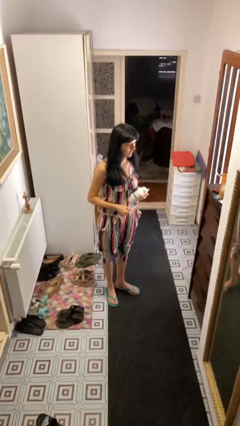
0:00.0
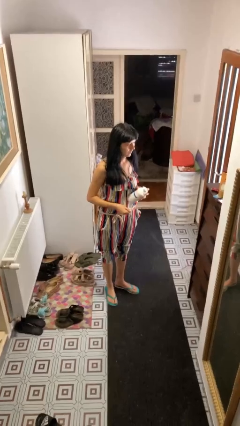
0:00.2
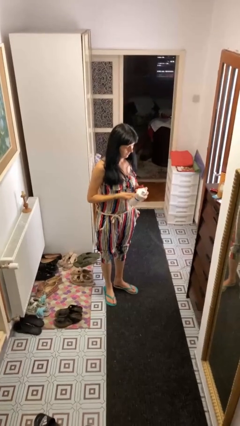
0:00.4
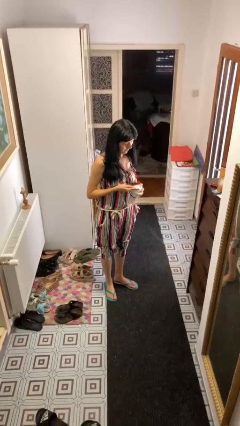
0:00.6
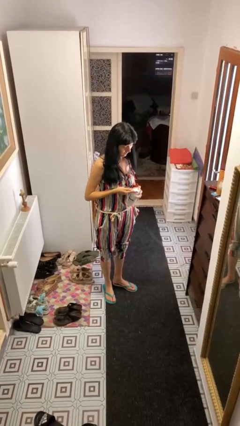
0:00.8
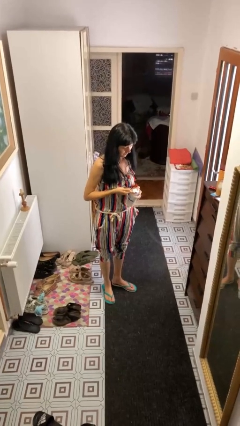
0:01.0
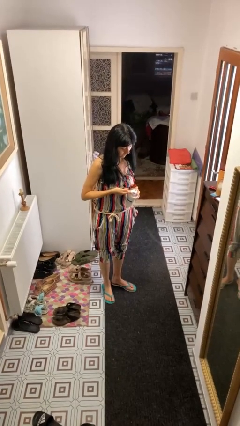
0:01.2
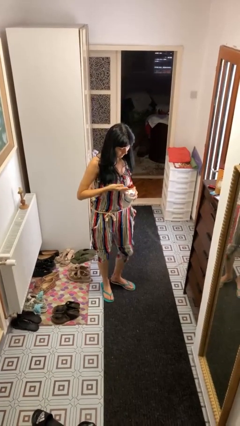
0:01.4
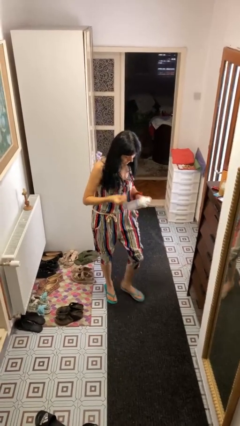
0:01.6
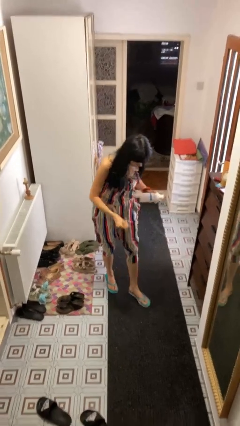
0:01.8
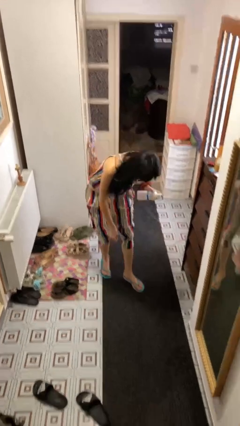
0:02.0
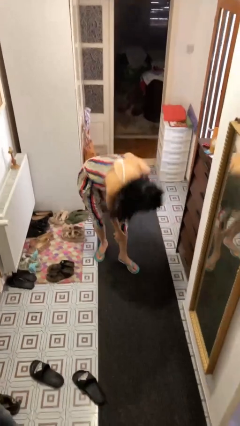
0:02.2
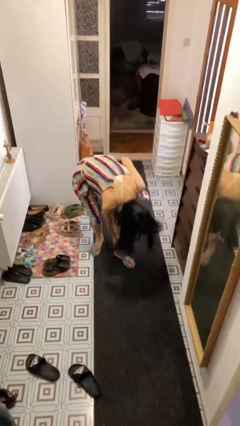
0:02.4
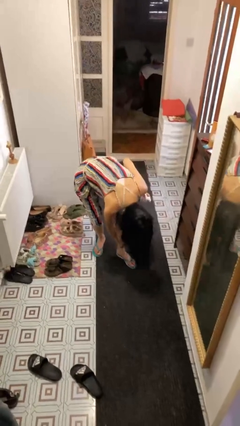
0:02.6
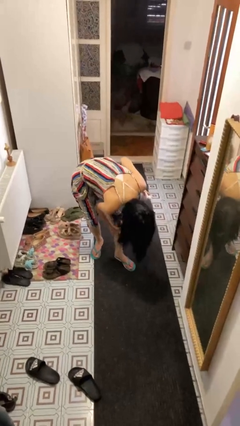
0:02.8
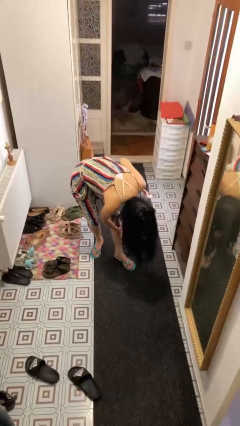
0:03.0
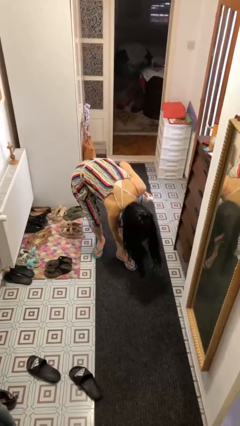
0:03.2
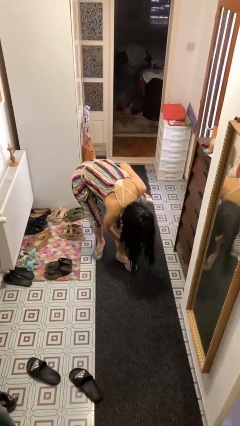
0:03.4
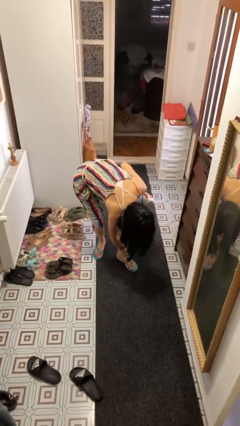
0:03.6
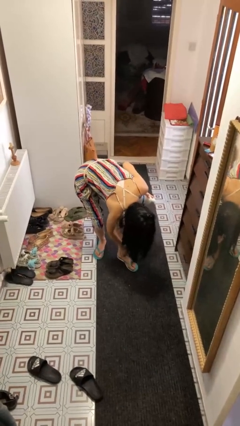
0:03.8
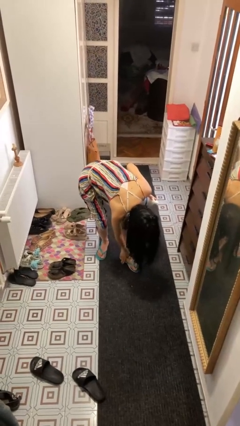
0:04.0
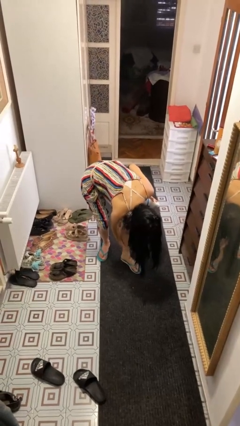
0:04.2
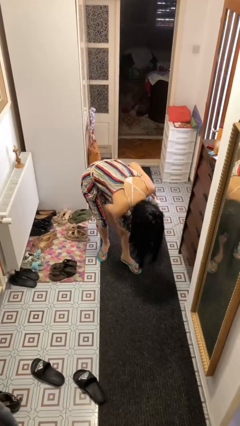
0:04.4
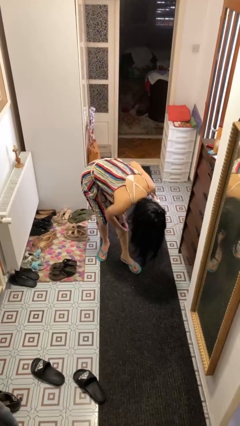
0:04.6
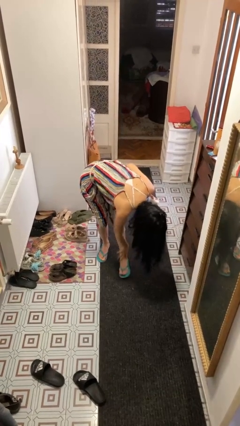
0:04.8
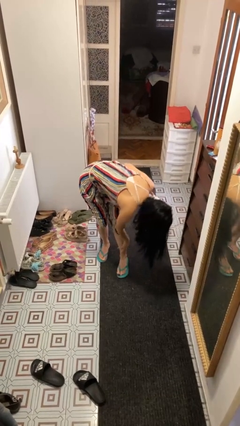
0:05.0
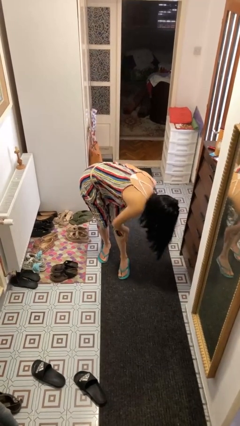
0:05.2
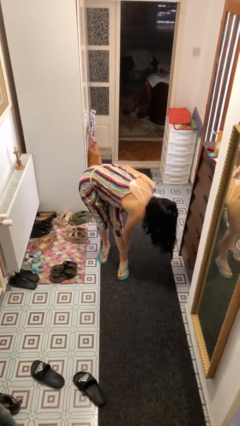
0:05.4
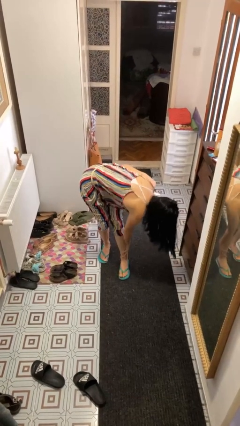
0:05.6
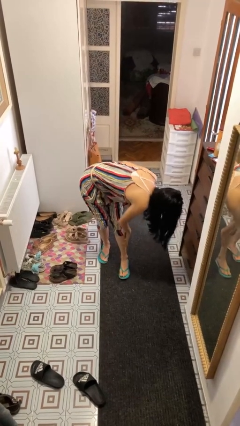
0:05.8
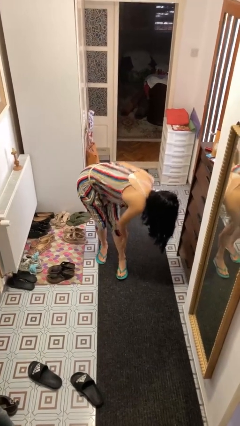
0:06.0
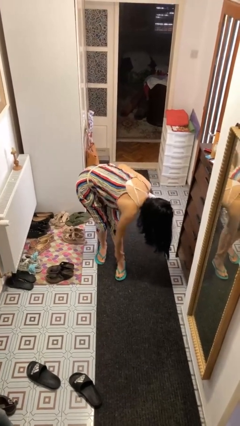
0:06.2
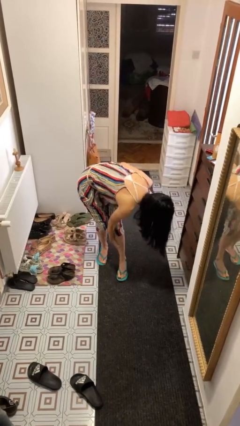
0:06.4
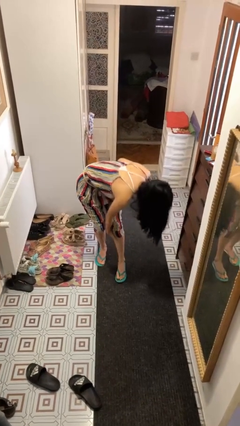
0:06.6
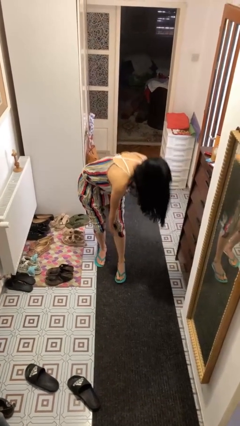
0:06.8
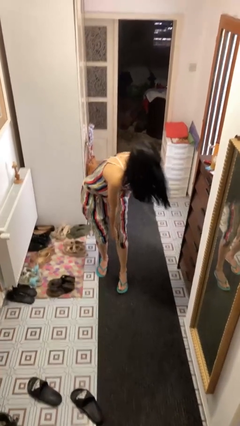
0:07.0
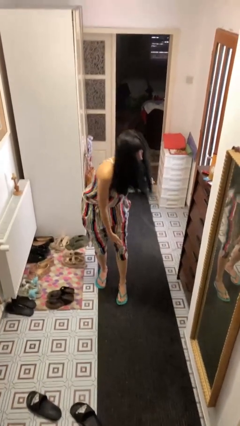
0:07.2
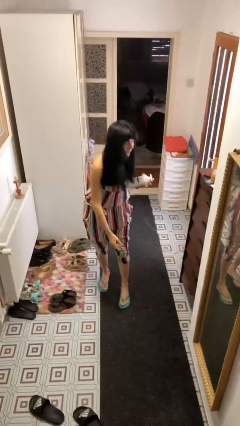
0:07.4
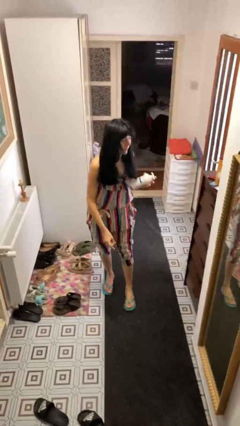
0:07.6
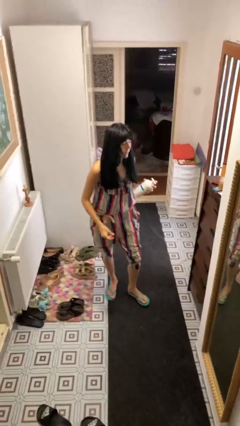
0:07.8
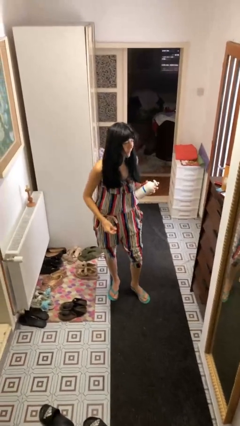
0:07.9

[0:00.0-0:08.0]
person applies sunscreen

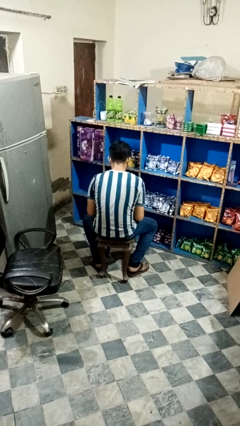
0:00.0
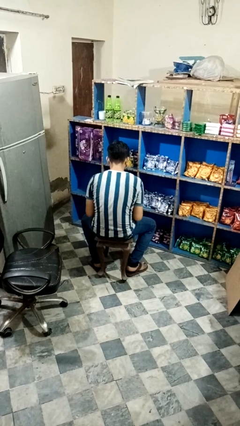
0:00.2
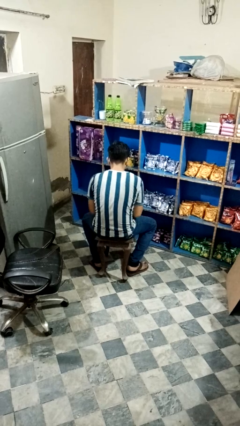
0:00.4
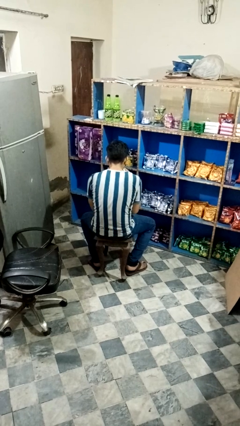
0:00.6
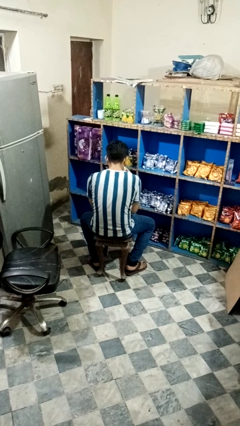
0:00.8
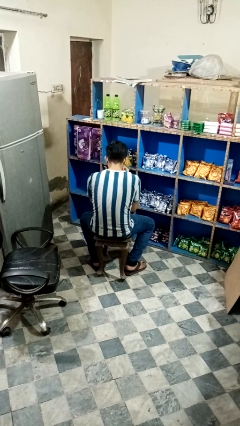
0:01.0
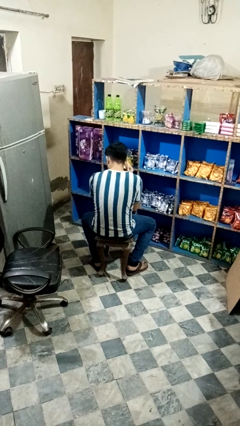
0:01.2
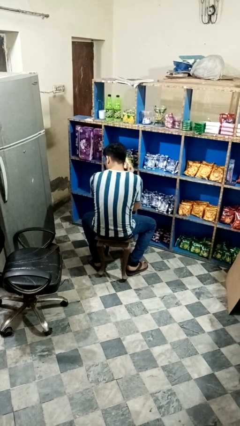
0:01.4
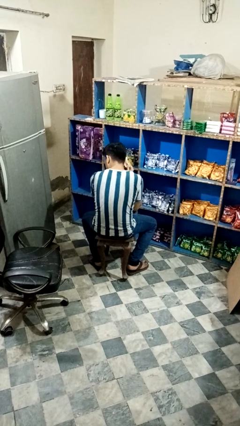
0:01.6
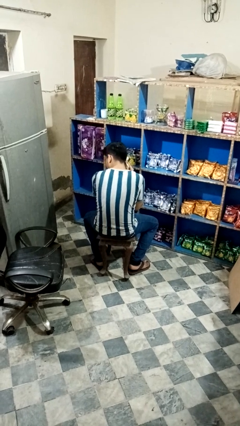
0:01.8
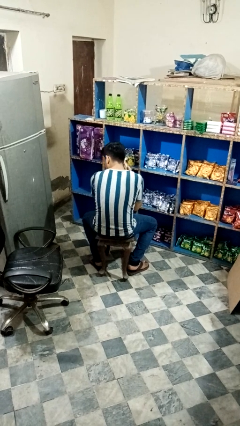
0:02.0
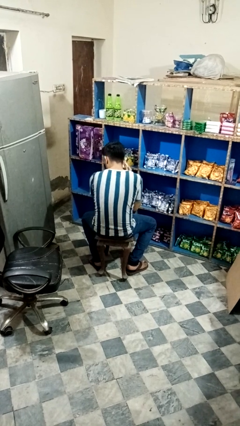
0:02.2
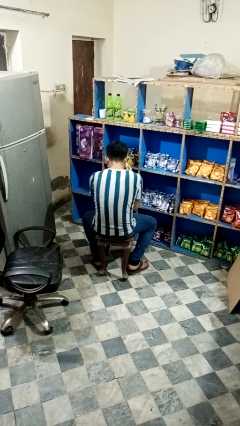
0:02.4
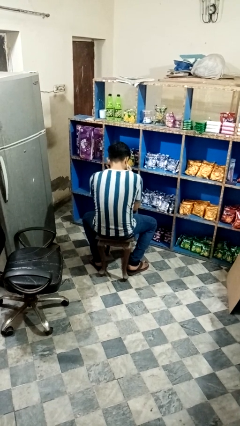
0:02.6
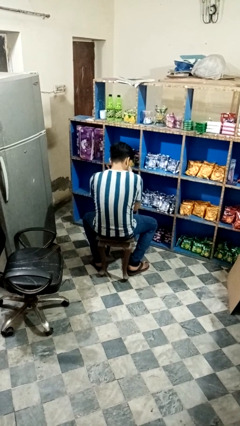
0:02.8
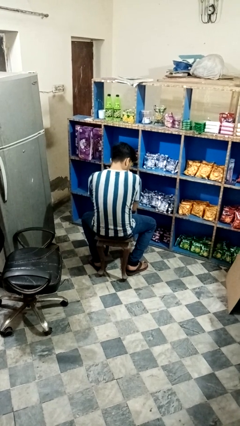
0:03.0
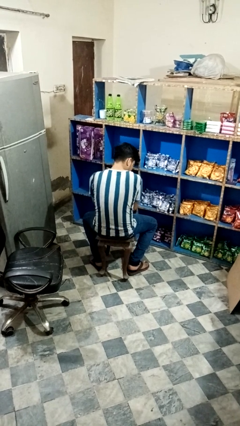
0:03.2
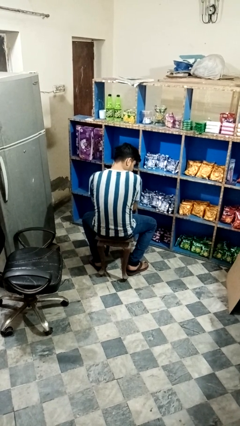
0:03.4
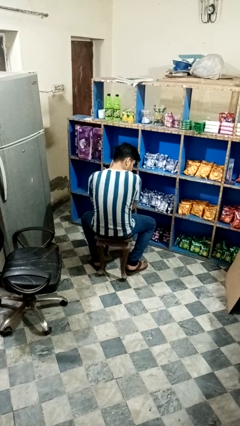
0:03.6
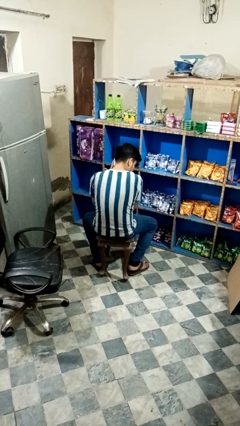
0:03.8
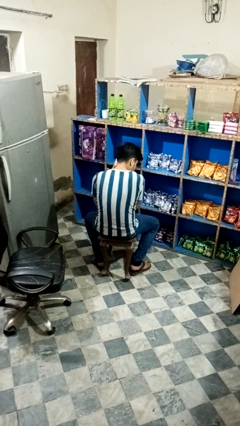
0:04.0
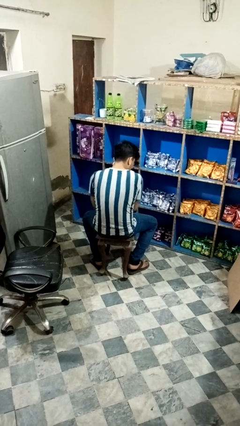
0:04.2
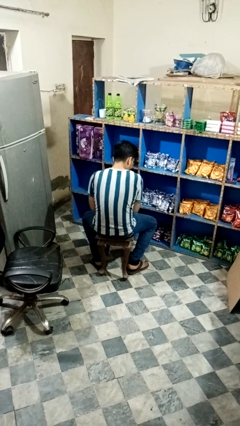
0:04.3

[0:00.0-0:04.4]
person wipes mouth with napkin

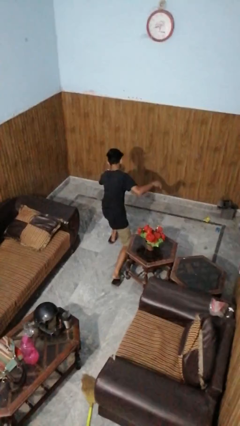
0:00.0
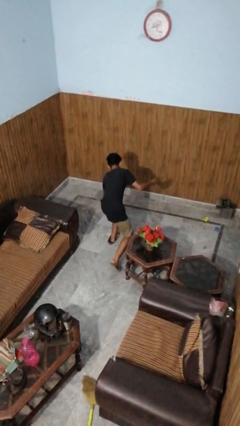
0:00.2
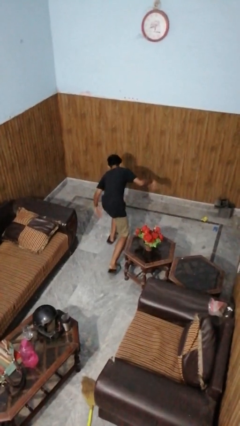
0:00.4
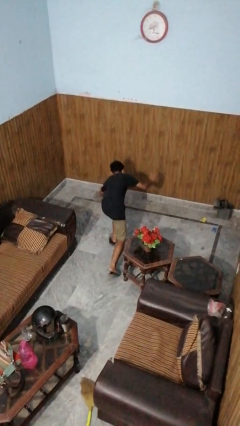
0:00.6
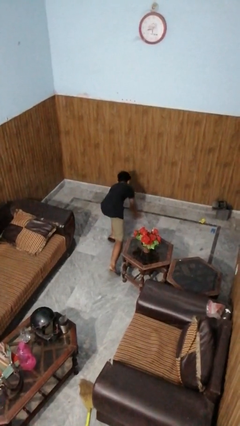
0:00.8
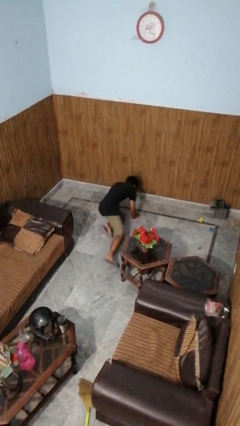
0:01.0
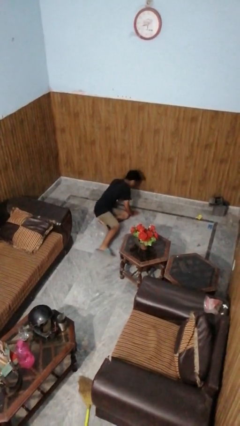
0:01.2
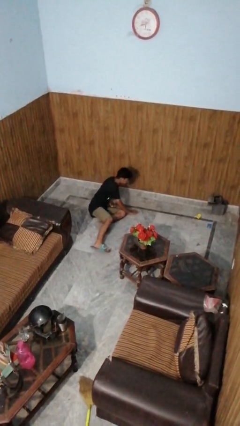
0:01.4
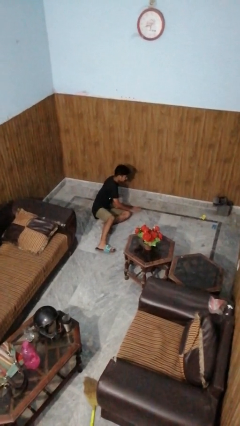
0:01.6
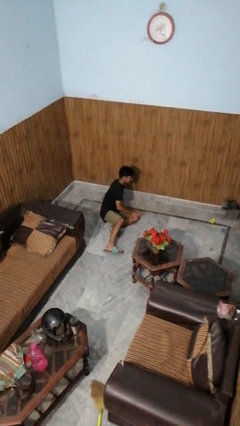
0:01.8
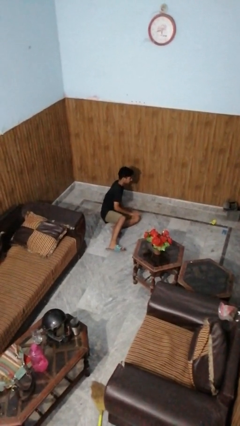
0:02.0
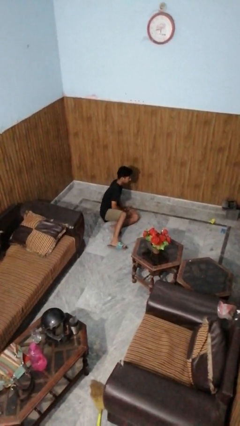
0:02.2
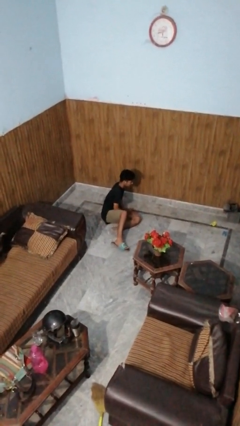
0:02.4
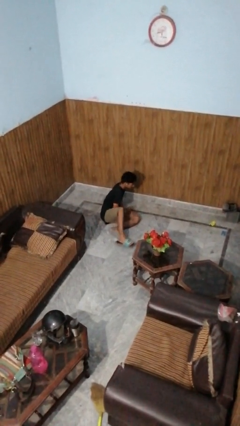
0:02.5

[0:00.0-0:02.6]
person lies down on floor

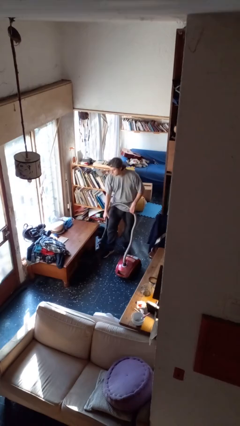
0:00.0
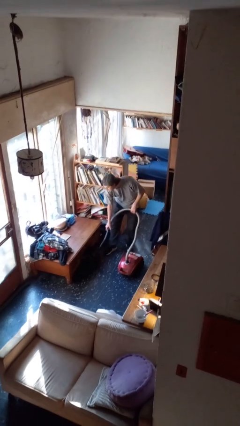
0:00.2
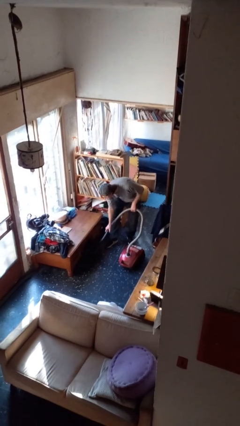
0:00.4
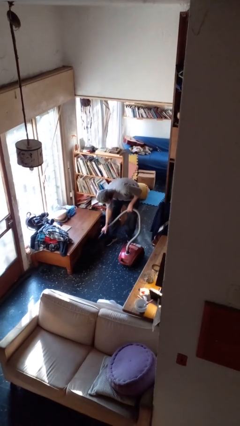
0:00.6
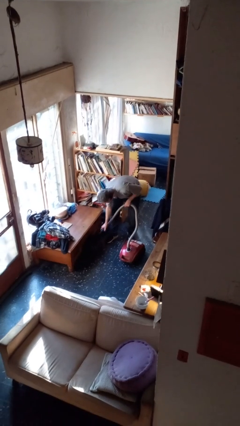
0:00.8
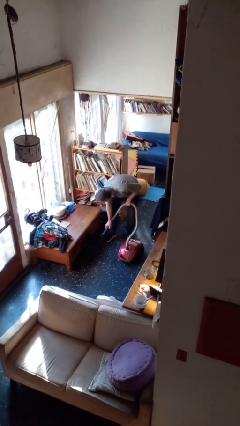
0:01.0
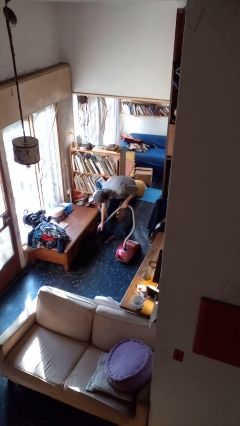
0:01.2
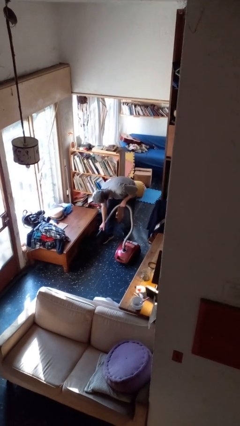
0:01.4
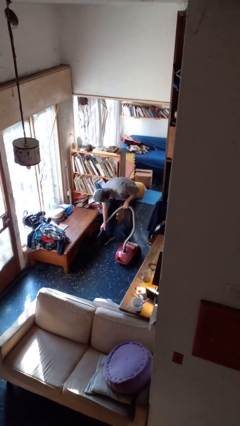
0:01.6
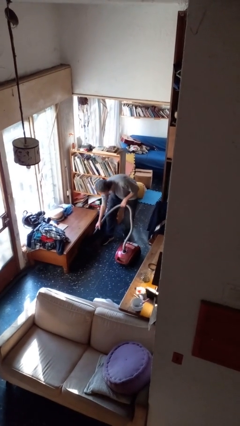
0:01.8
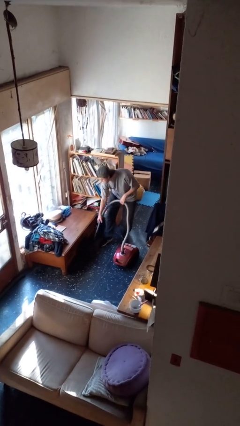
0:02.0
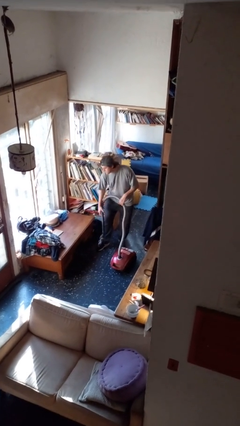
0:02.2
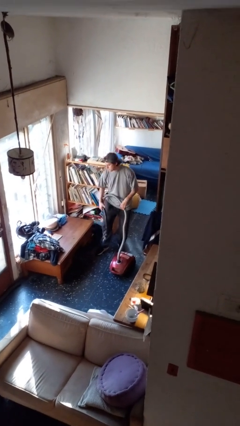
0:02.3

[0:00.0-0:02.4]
person vacuums carpet

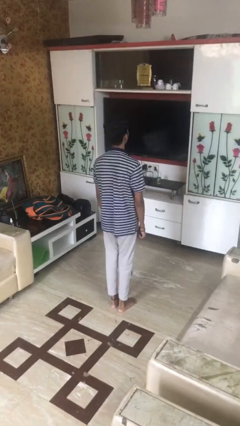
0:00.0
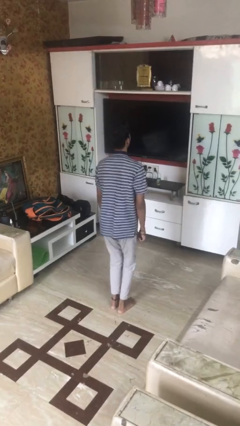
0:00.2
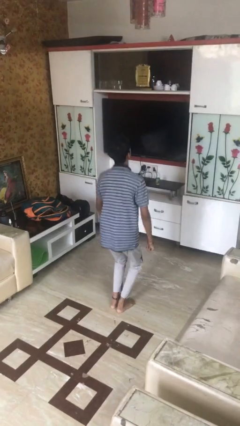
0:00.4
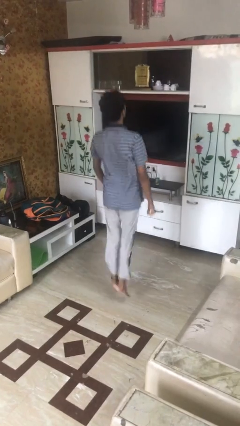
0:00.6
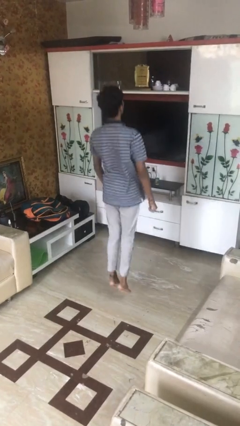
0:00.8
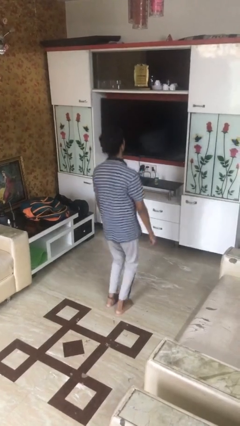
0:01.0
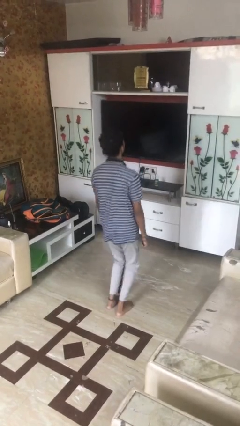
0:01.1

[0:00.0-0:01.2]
person jumps
